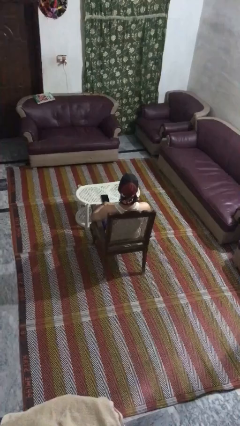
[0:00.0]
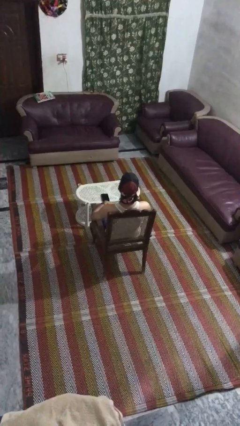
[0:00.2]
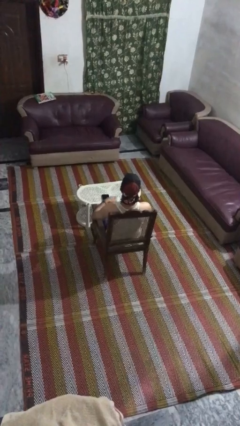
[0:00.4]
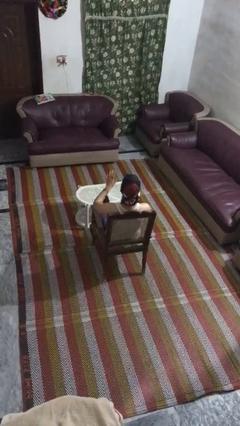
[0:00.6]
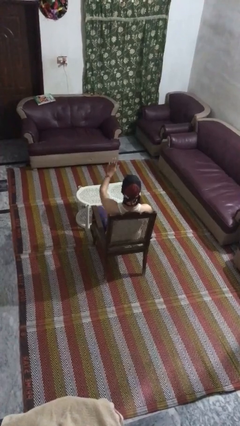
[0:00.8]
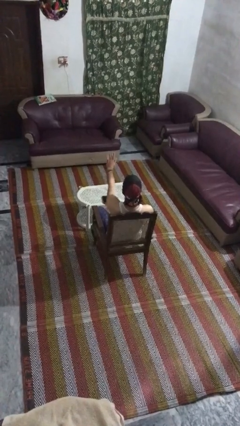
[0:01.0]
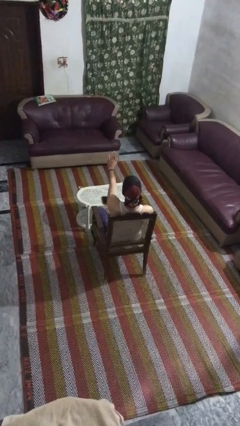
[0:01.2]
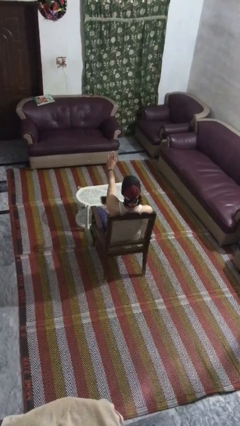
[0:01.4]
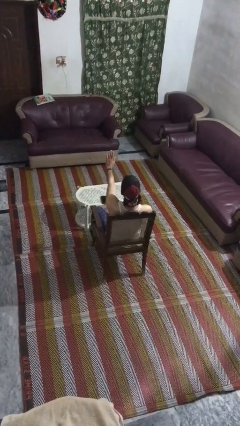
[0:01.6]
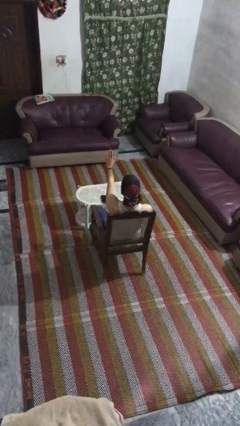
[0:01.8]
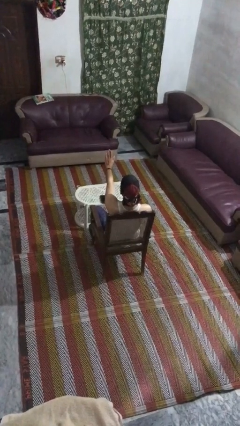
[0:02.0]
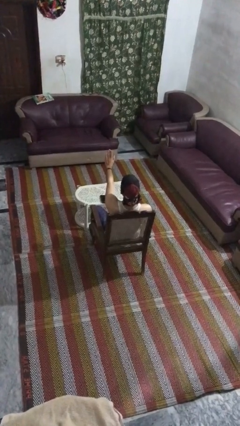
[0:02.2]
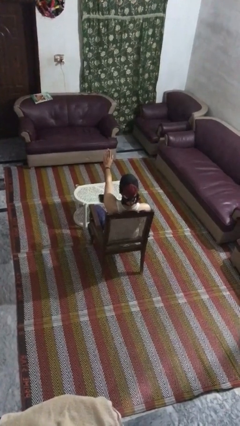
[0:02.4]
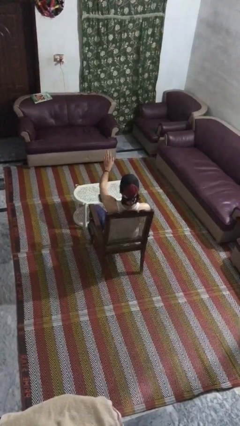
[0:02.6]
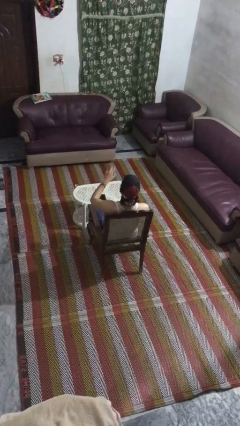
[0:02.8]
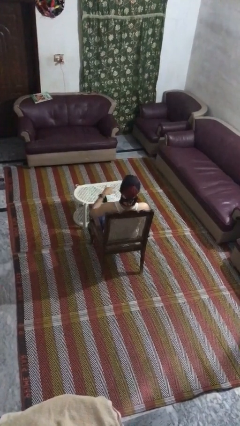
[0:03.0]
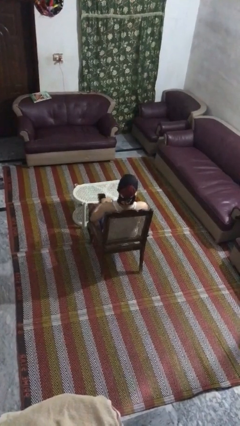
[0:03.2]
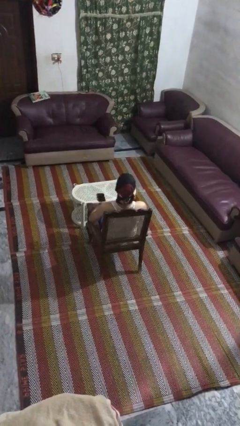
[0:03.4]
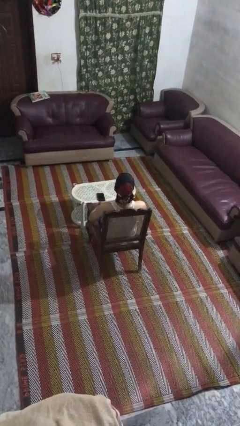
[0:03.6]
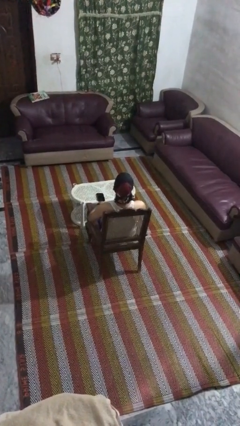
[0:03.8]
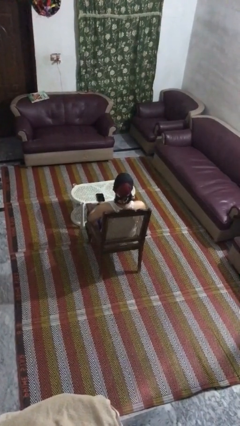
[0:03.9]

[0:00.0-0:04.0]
person gestures stop

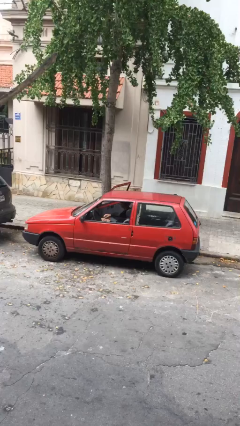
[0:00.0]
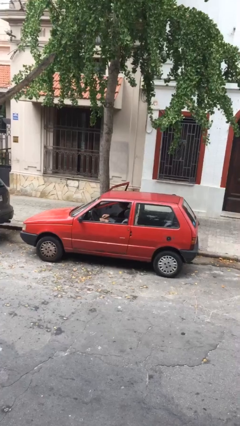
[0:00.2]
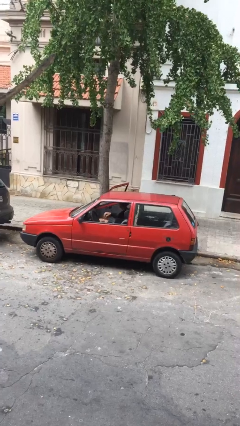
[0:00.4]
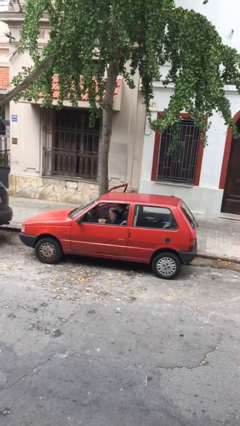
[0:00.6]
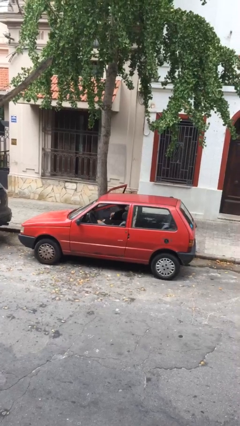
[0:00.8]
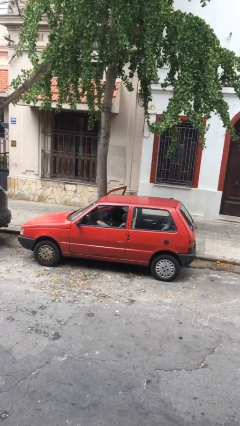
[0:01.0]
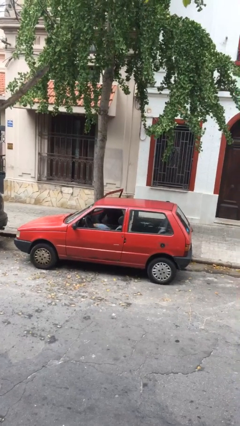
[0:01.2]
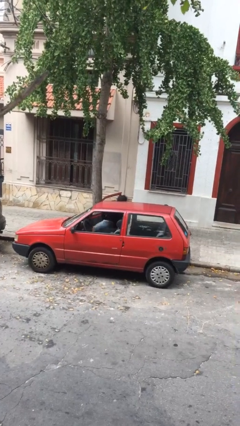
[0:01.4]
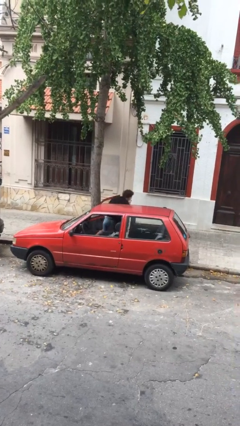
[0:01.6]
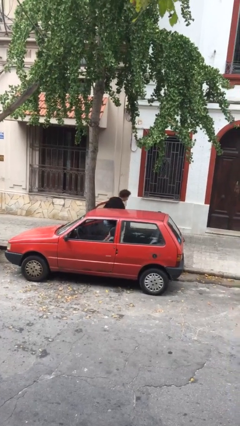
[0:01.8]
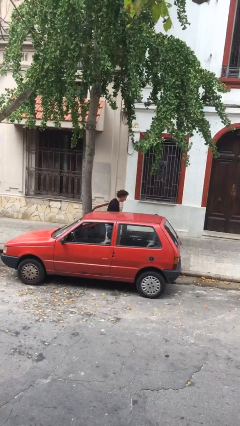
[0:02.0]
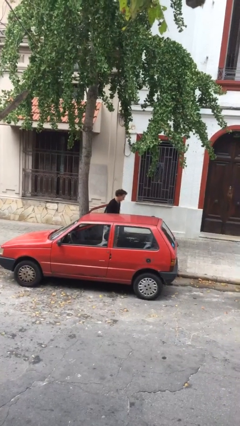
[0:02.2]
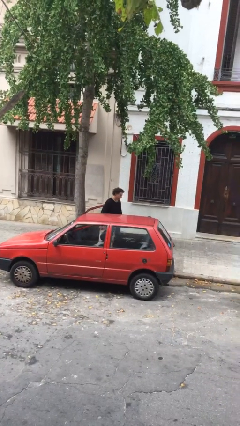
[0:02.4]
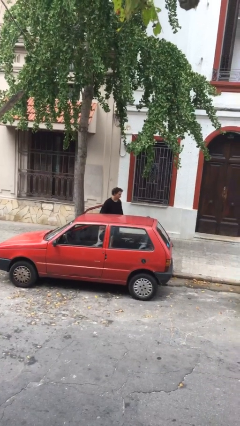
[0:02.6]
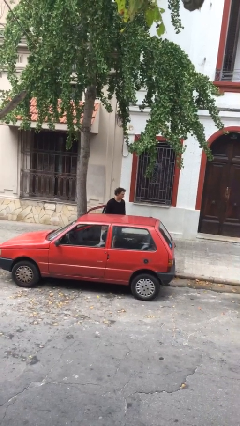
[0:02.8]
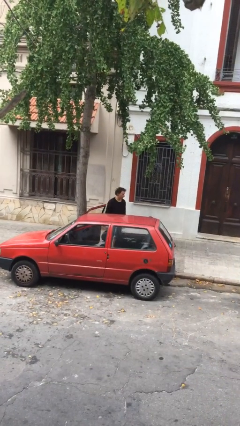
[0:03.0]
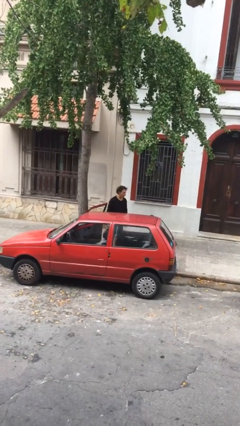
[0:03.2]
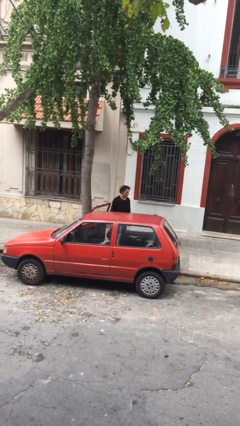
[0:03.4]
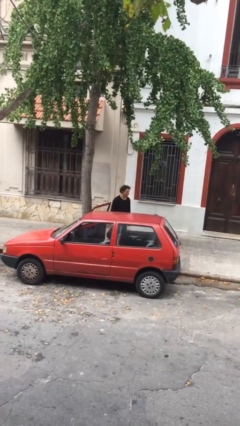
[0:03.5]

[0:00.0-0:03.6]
person exits car

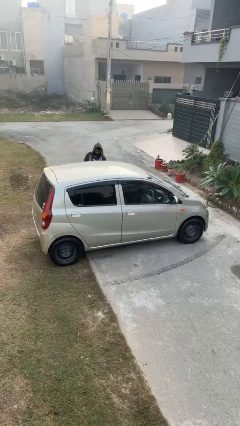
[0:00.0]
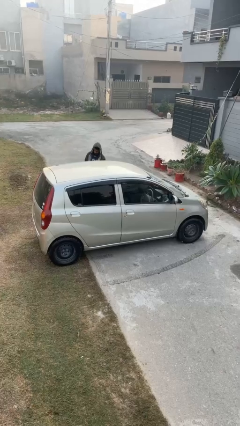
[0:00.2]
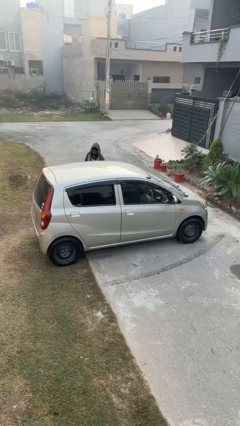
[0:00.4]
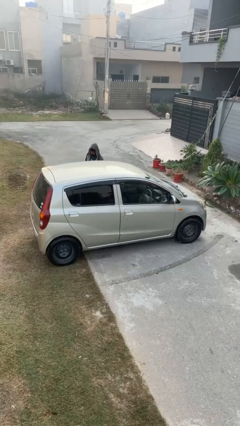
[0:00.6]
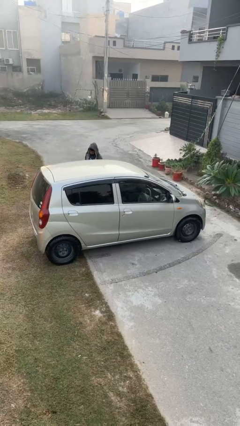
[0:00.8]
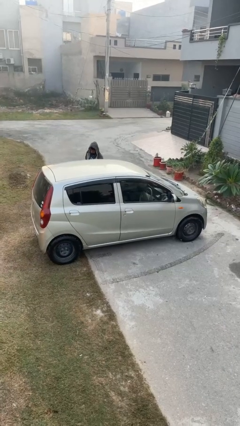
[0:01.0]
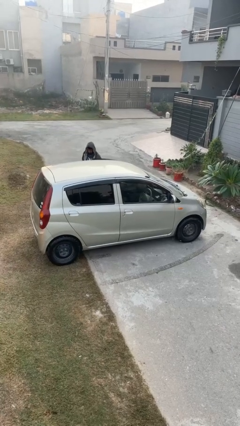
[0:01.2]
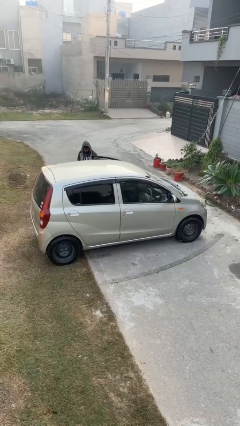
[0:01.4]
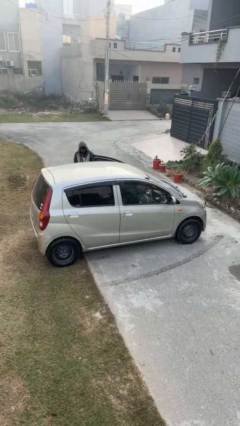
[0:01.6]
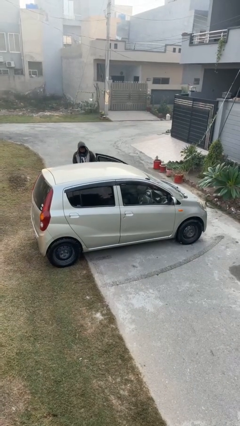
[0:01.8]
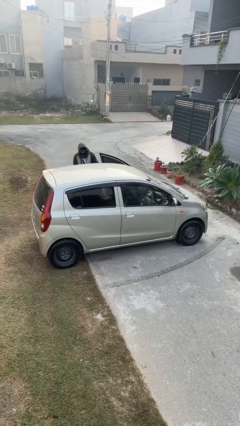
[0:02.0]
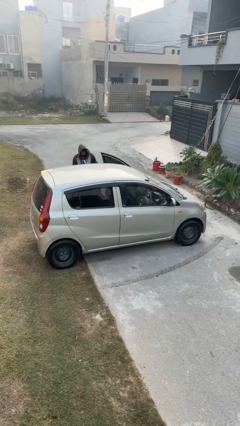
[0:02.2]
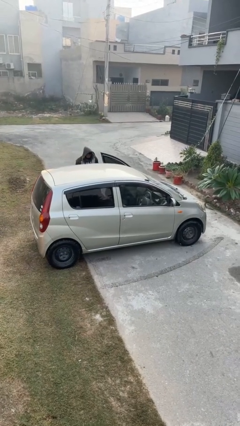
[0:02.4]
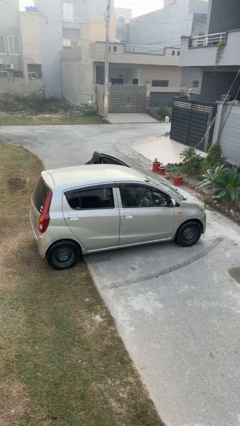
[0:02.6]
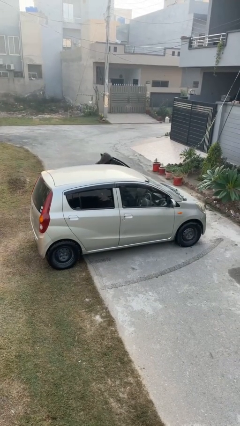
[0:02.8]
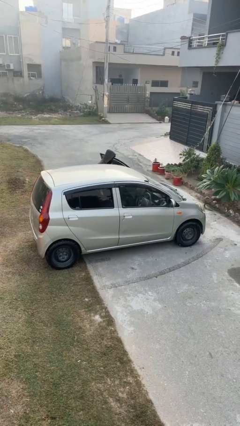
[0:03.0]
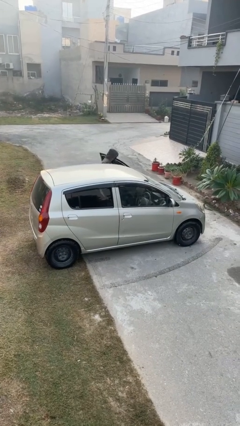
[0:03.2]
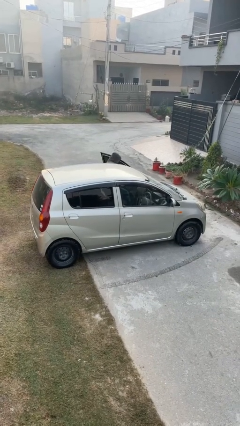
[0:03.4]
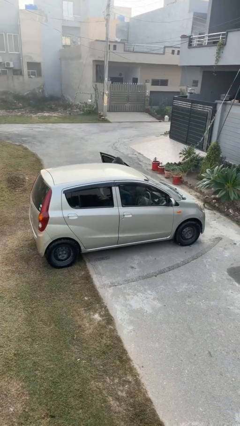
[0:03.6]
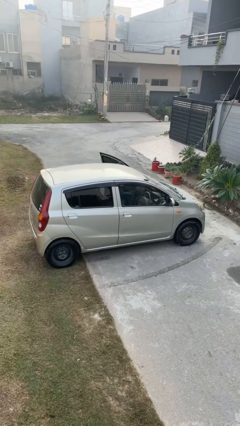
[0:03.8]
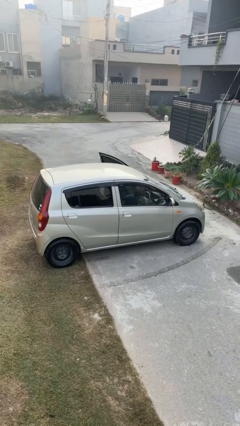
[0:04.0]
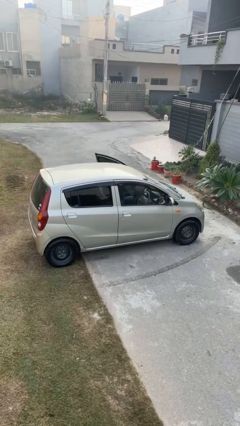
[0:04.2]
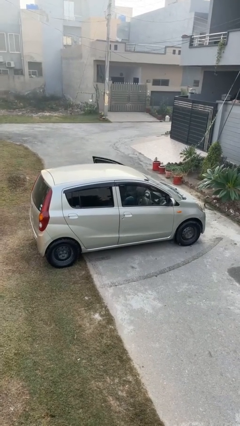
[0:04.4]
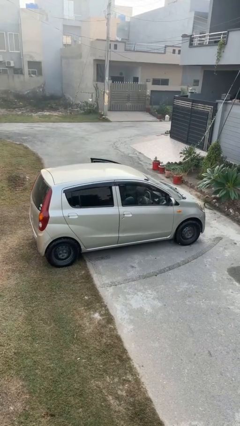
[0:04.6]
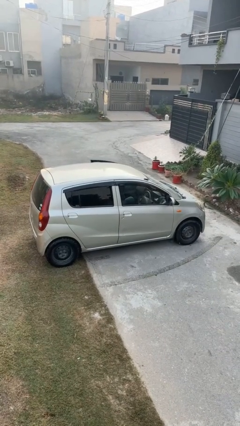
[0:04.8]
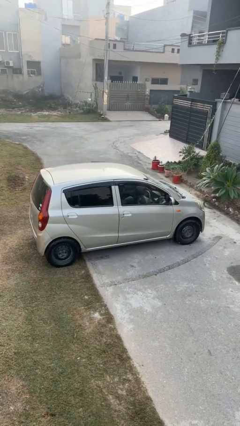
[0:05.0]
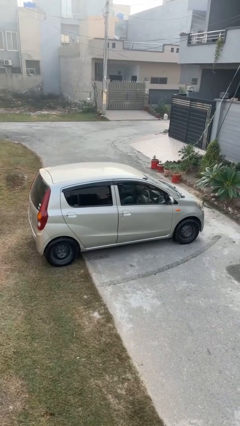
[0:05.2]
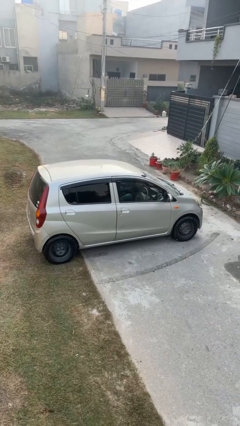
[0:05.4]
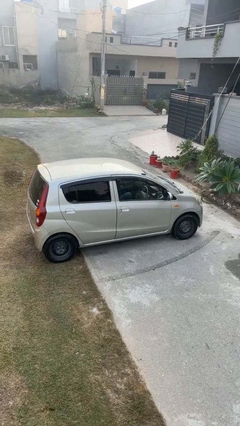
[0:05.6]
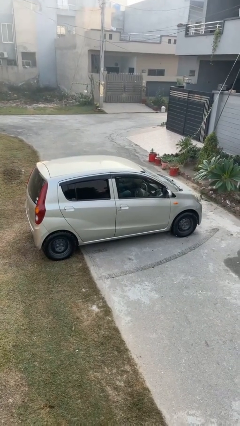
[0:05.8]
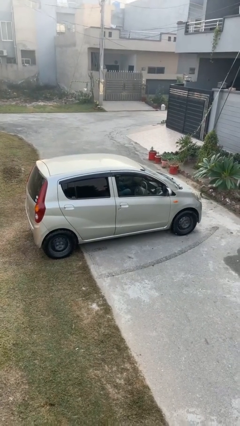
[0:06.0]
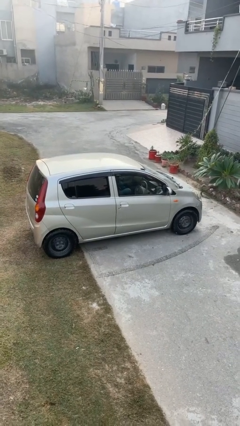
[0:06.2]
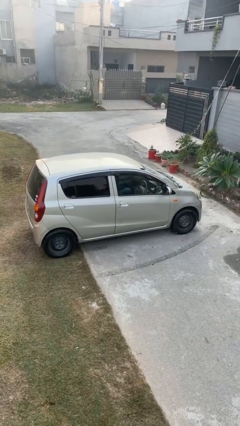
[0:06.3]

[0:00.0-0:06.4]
car picks up person

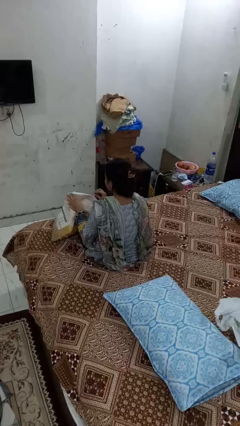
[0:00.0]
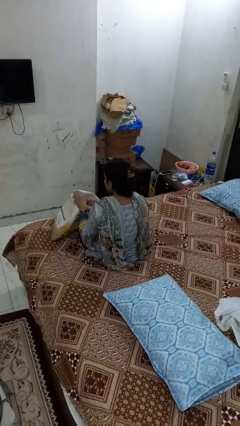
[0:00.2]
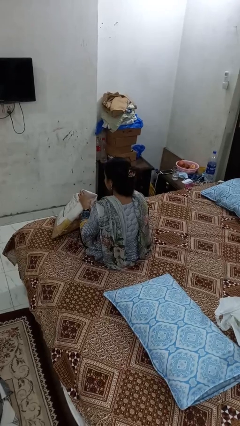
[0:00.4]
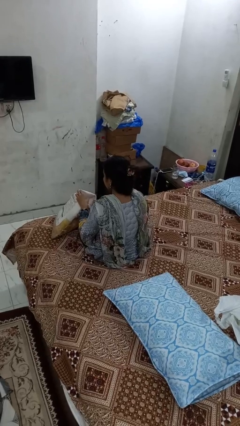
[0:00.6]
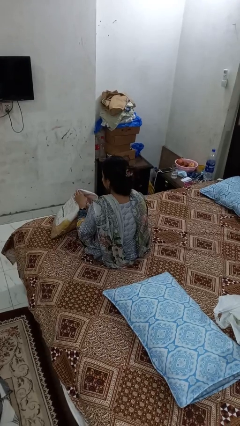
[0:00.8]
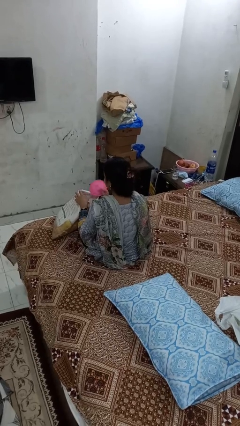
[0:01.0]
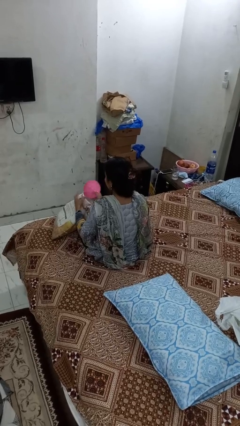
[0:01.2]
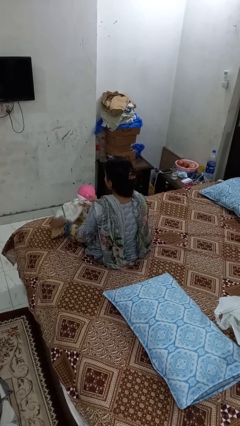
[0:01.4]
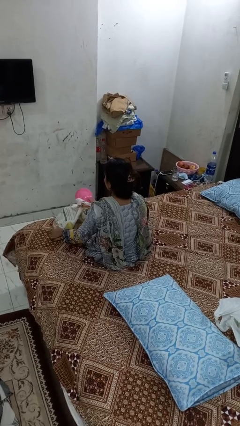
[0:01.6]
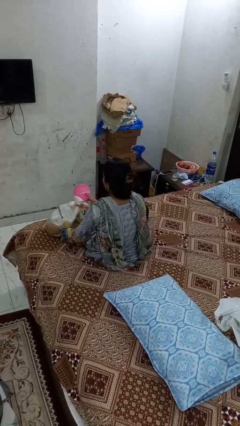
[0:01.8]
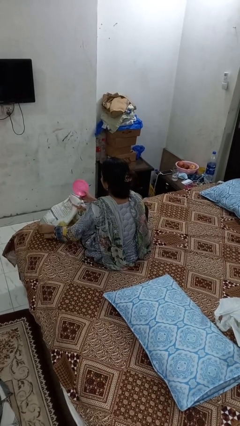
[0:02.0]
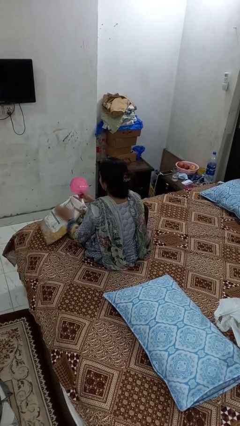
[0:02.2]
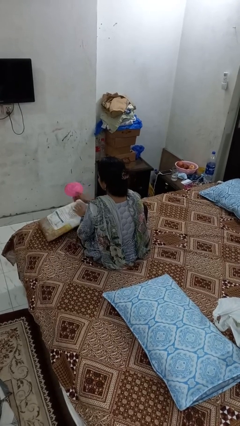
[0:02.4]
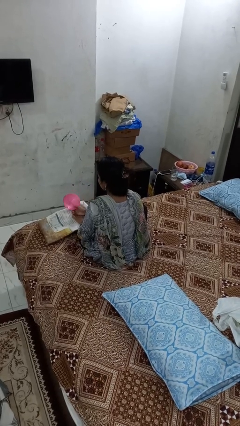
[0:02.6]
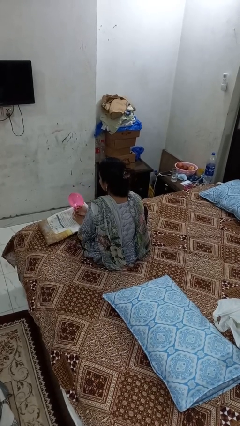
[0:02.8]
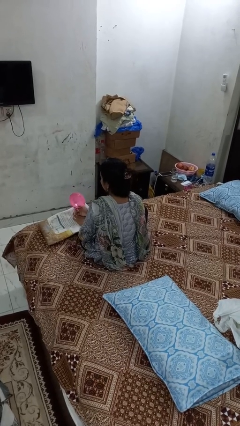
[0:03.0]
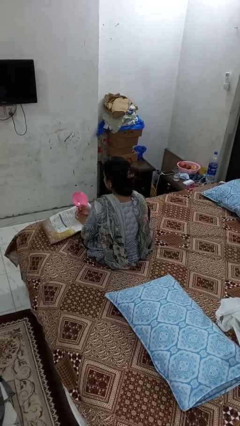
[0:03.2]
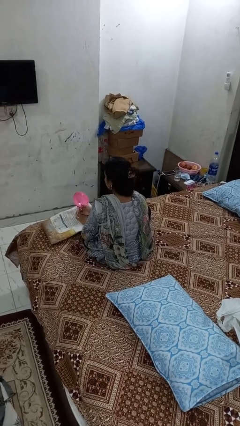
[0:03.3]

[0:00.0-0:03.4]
person takes object from bag

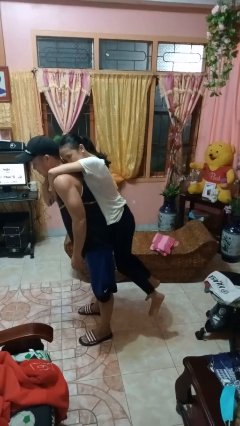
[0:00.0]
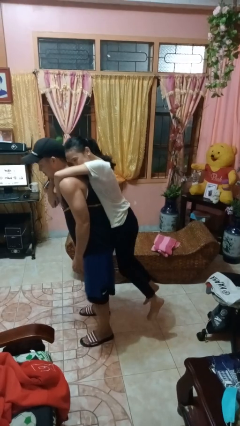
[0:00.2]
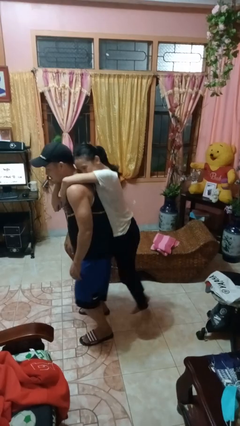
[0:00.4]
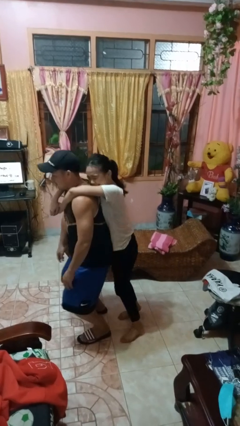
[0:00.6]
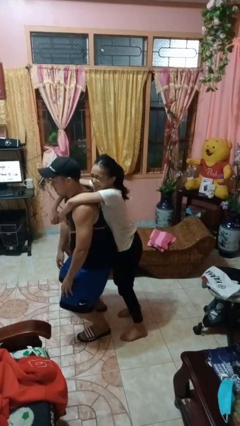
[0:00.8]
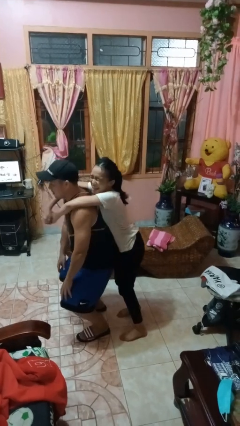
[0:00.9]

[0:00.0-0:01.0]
person puts down person
